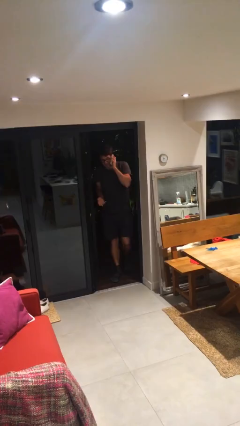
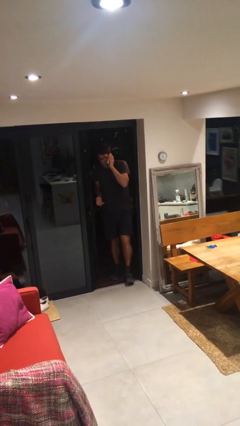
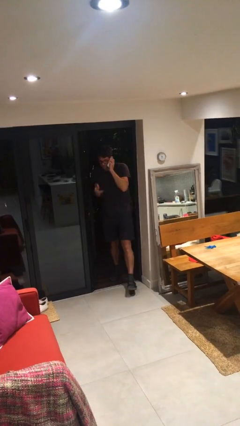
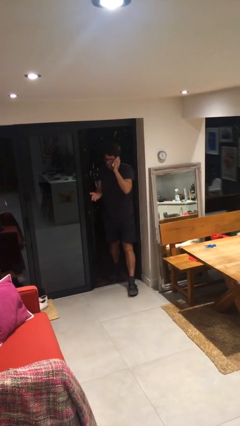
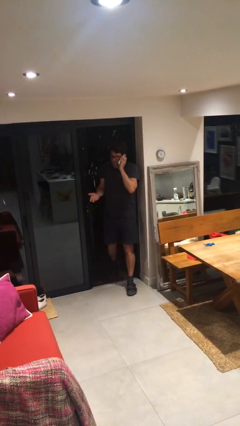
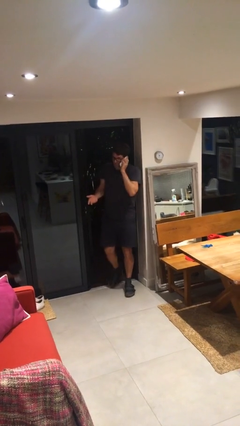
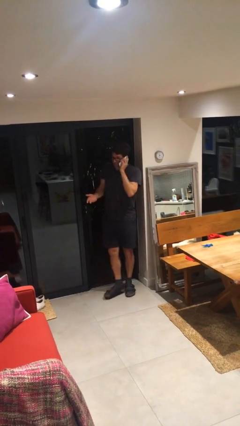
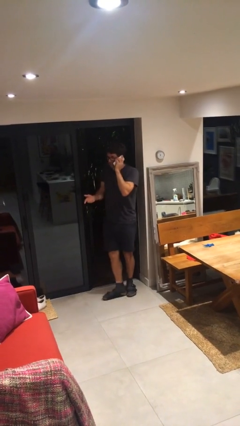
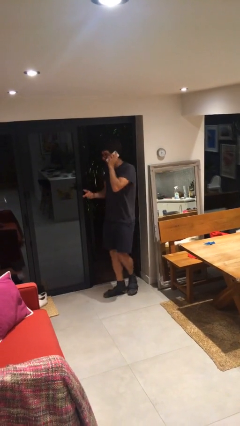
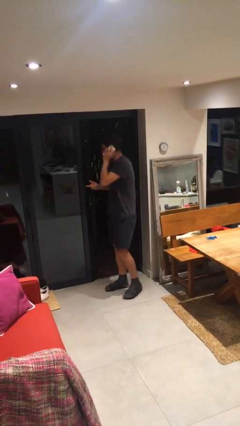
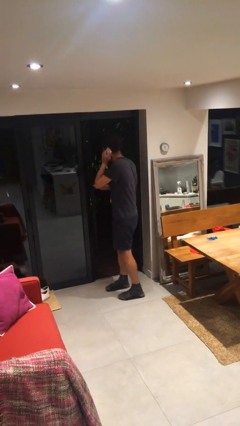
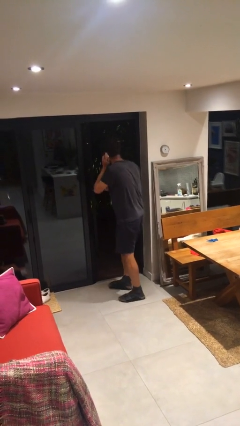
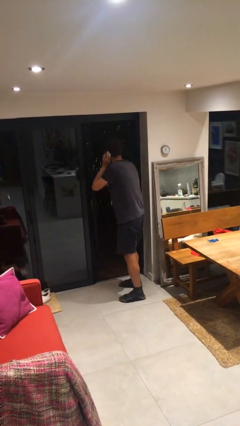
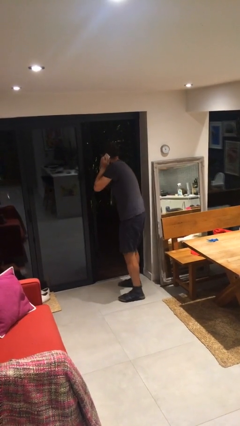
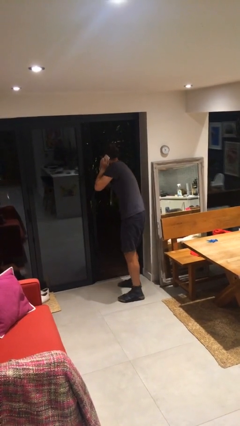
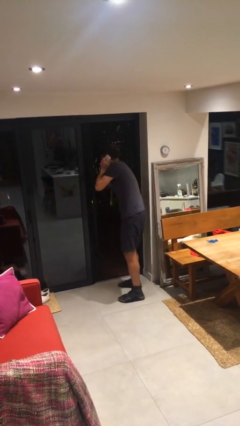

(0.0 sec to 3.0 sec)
person enters scene through structure

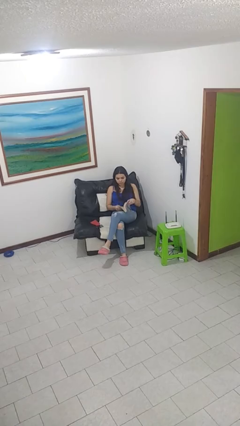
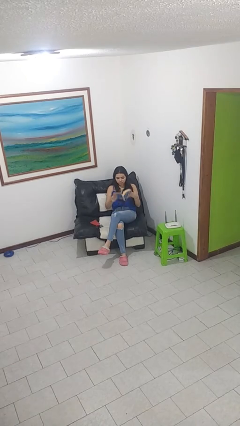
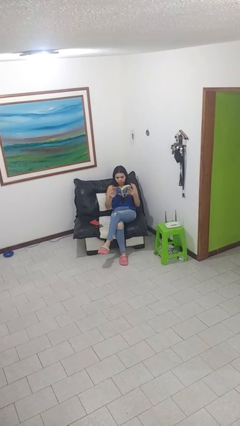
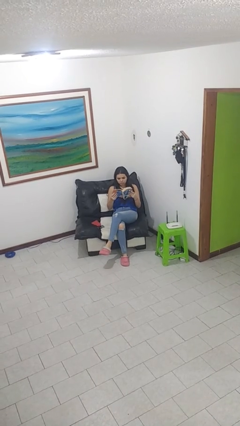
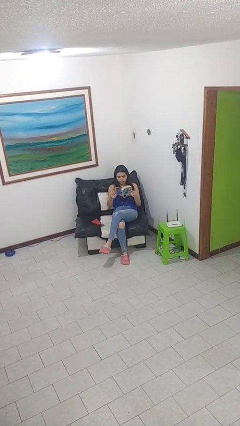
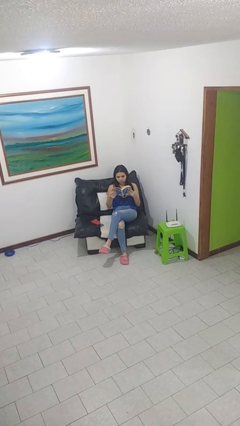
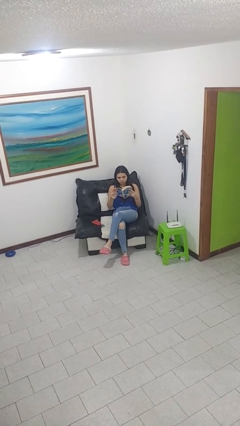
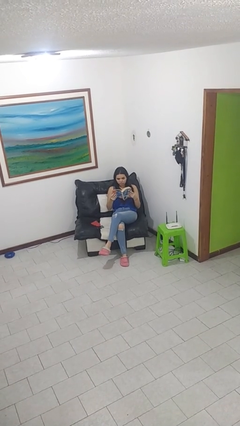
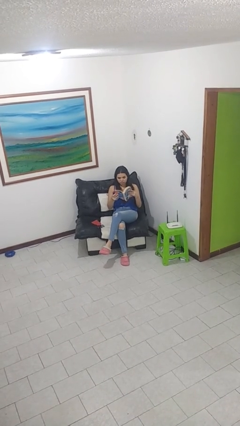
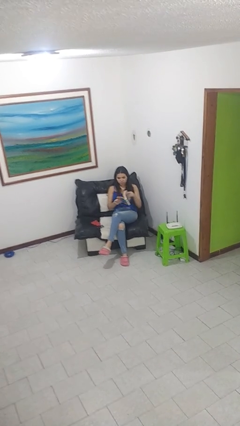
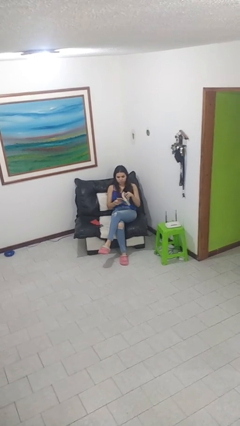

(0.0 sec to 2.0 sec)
person reads book

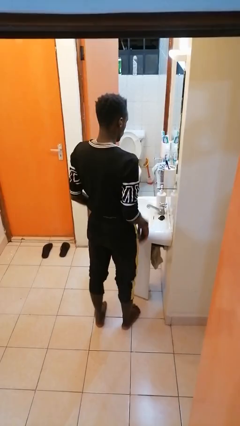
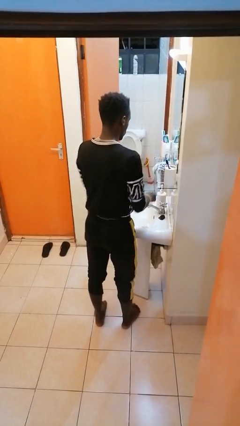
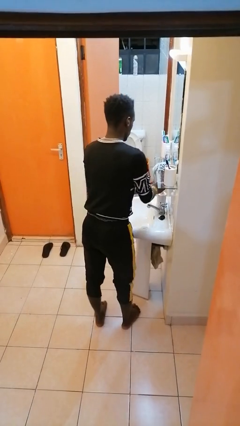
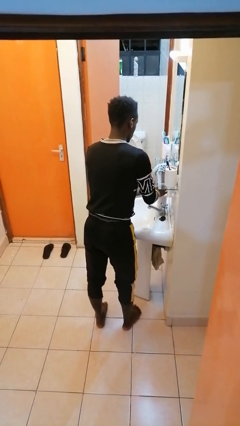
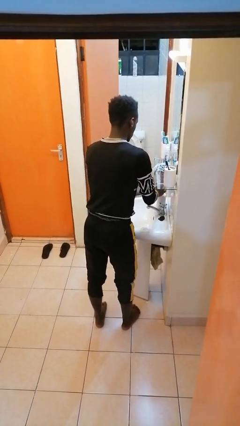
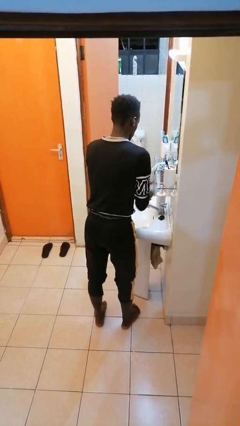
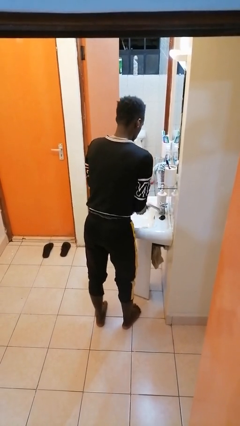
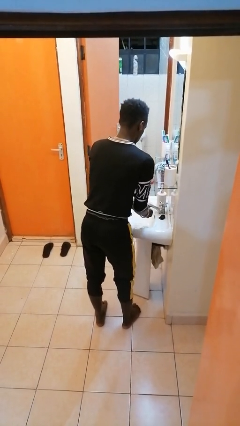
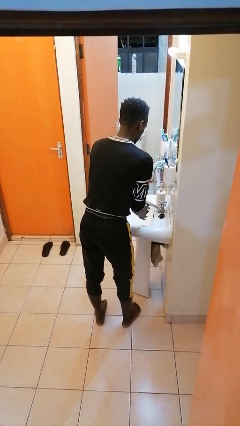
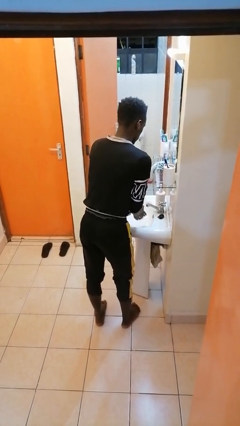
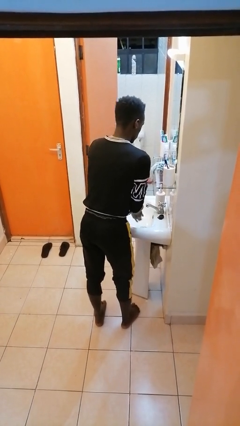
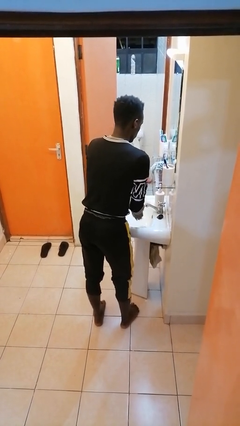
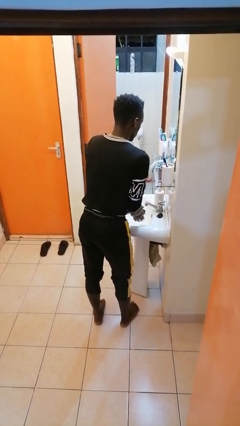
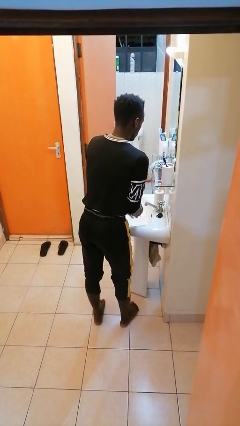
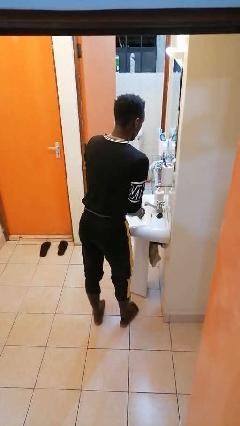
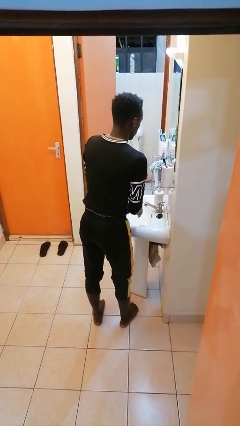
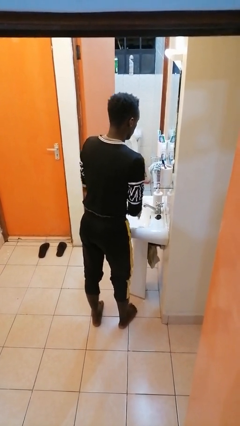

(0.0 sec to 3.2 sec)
person washes hands

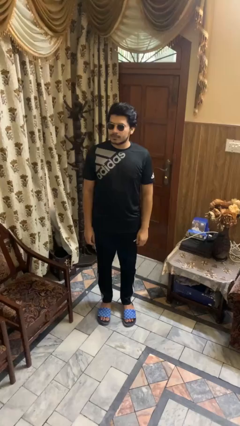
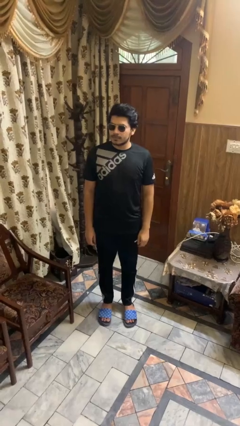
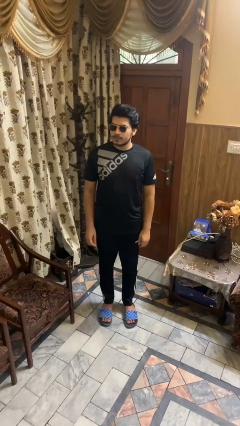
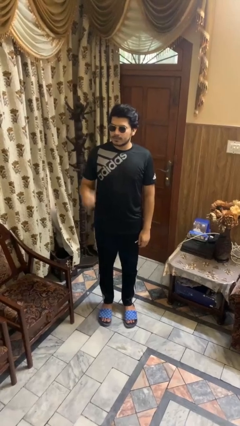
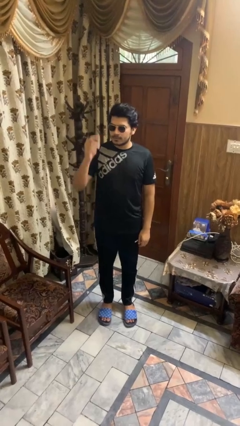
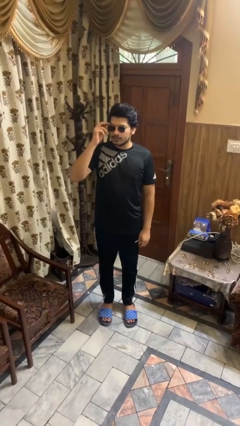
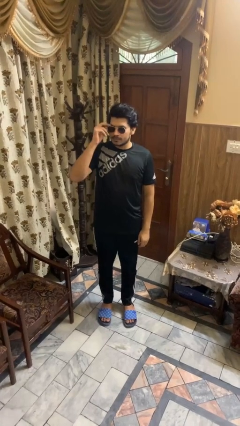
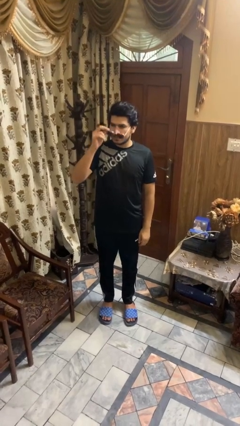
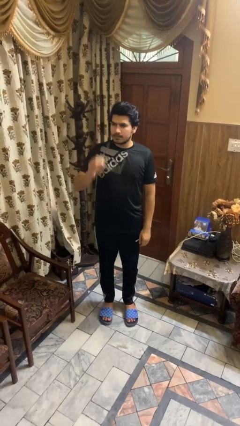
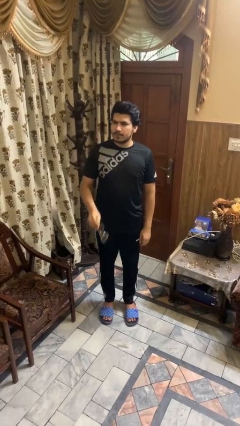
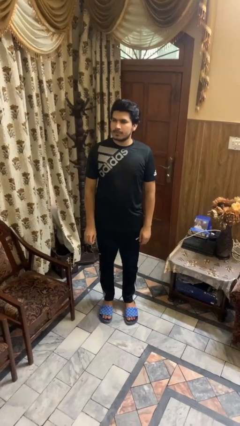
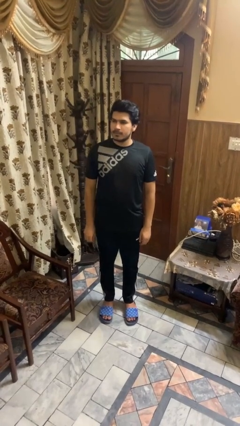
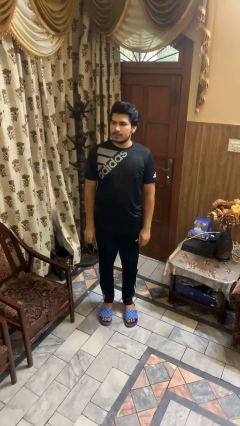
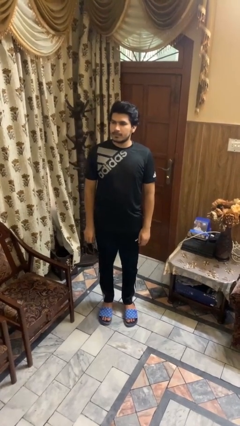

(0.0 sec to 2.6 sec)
person takes off sunglasses

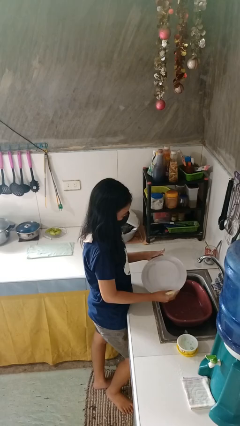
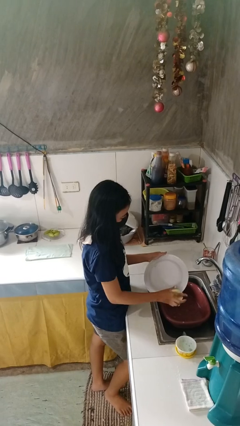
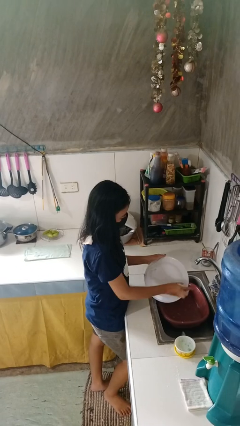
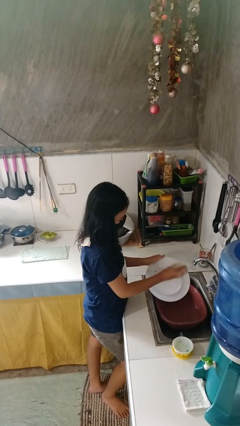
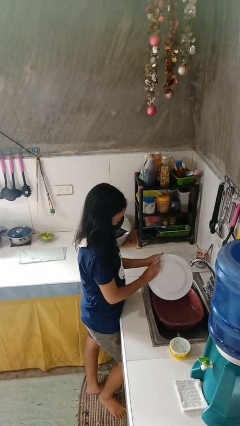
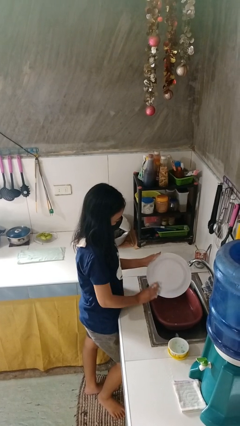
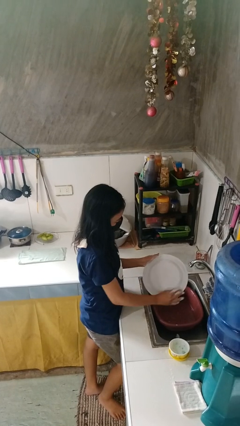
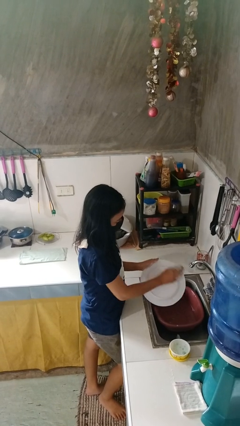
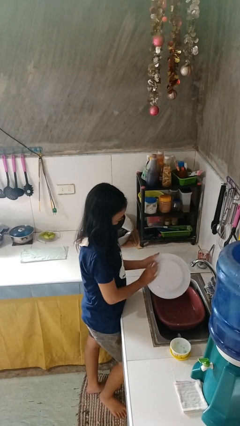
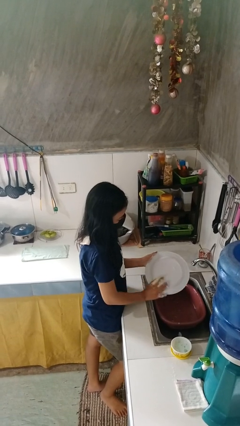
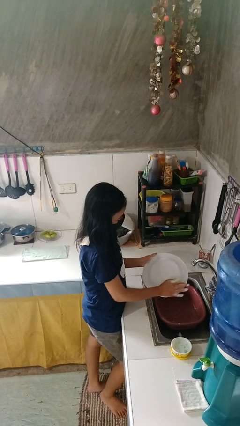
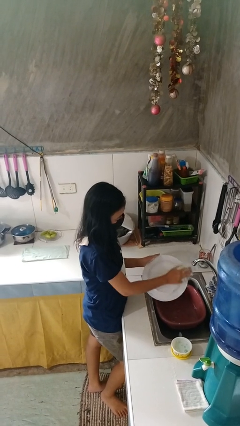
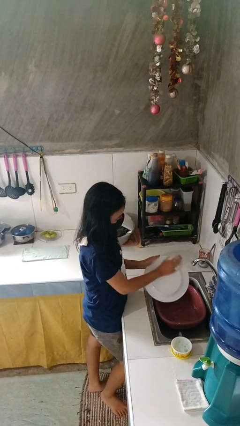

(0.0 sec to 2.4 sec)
person washes dish

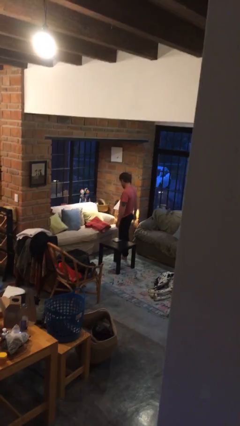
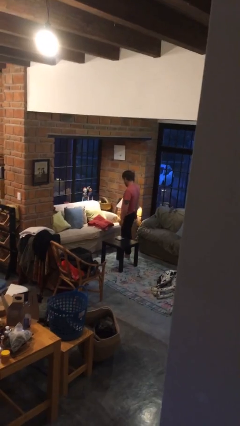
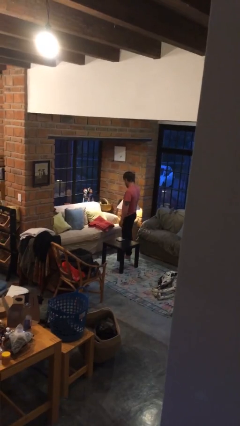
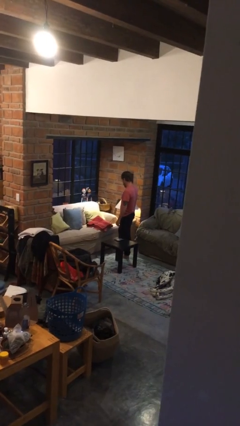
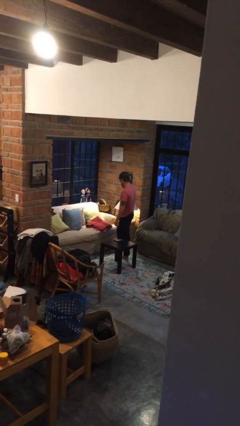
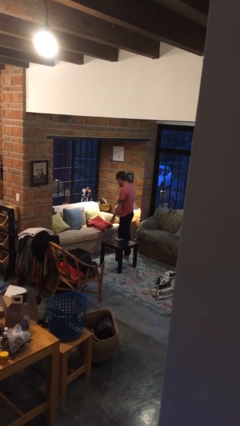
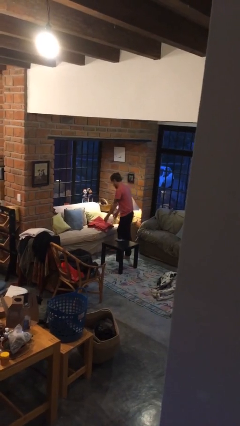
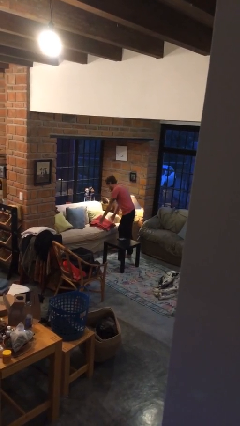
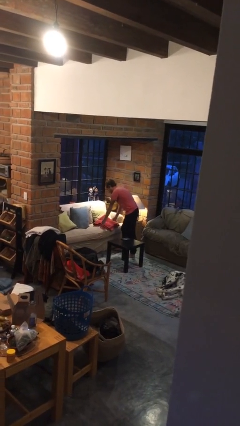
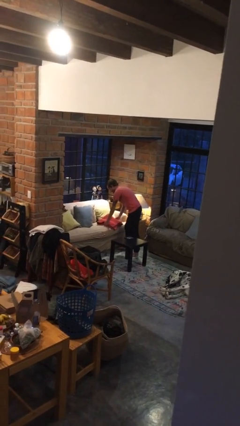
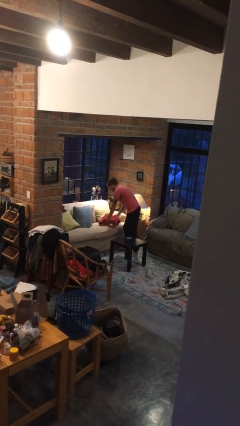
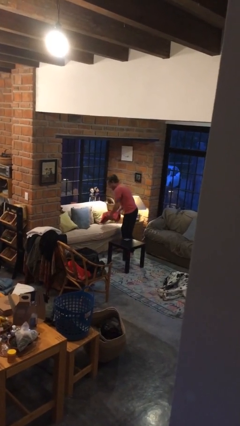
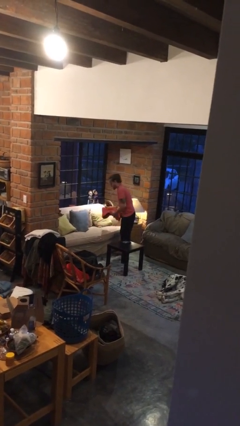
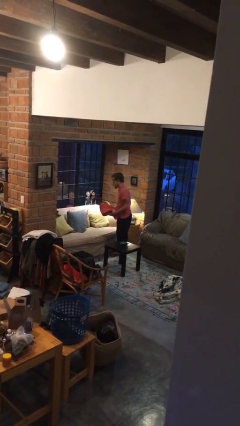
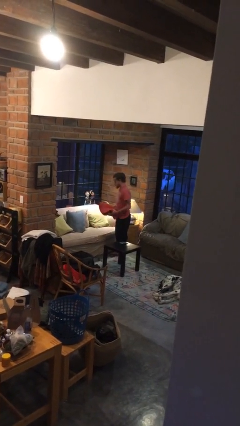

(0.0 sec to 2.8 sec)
person picks up object from couch

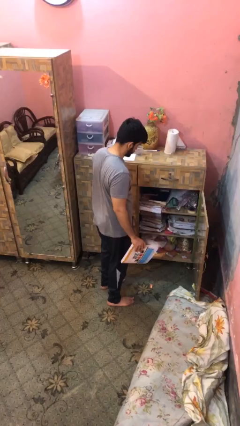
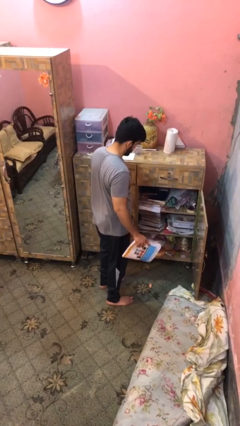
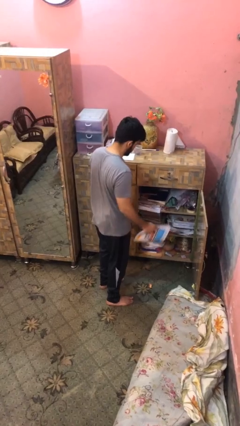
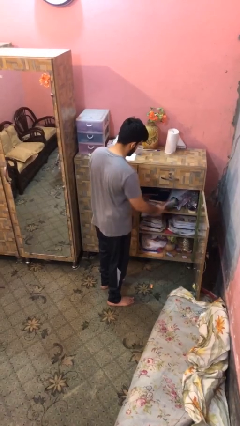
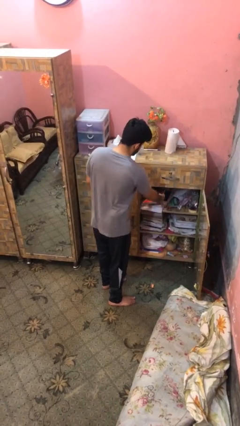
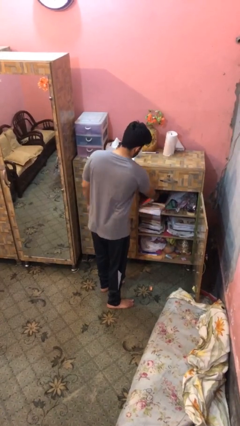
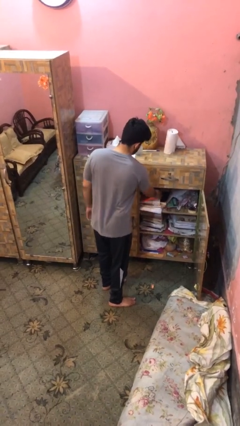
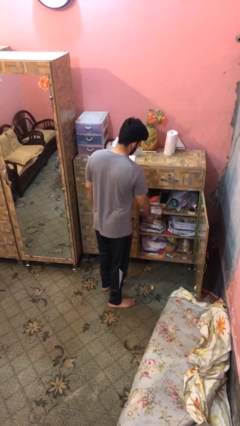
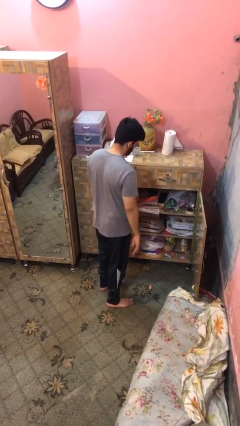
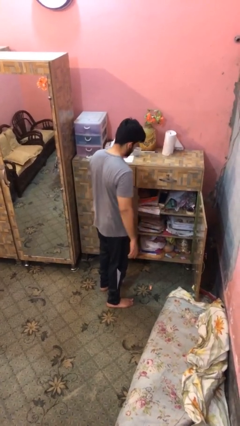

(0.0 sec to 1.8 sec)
person puts down object into cabinet
